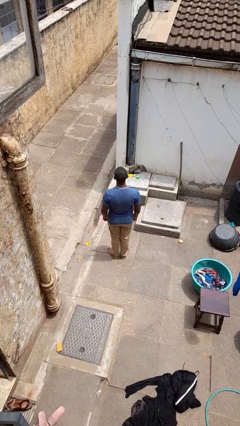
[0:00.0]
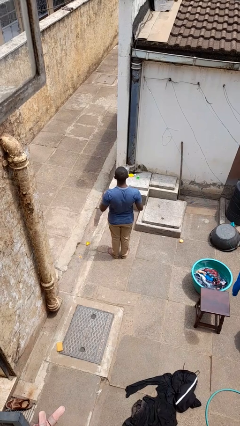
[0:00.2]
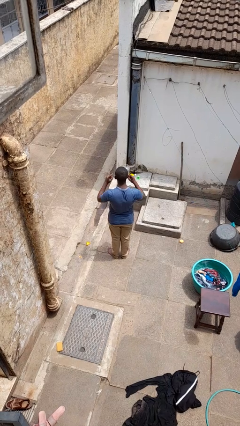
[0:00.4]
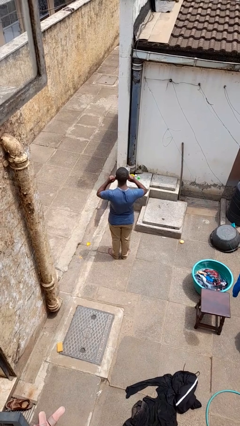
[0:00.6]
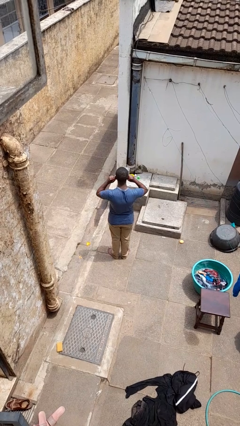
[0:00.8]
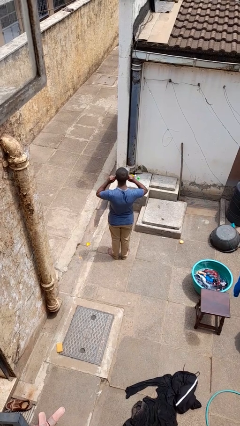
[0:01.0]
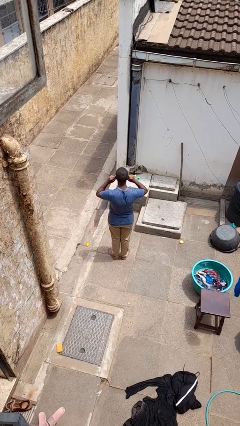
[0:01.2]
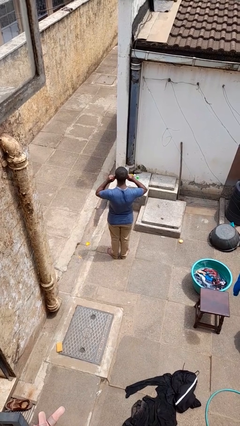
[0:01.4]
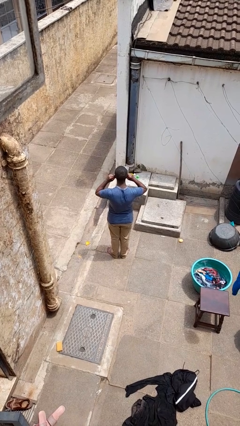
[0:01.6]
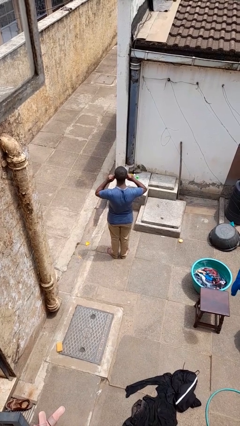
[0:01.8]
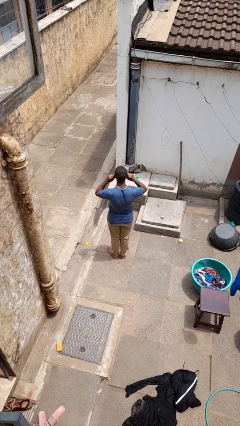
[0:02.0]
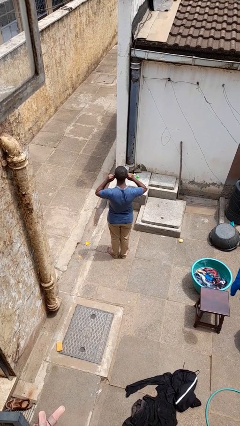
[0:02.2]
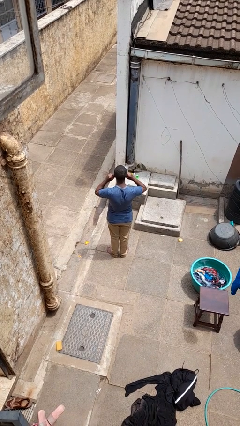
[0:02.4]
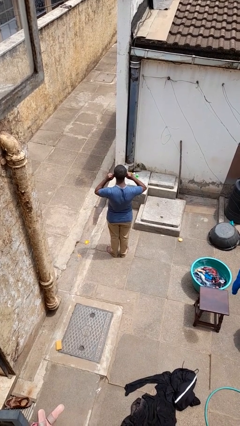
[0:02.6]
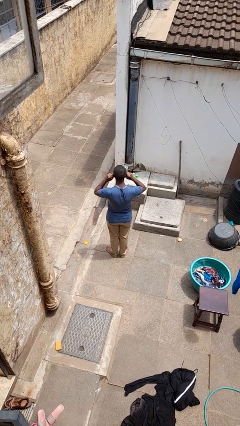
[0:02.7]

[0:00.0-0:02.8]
person puts fingers in ear

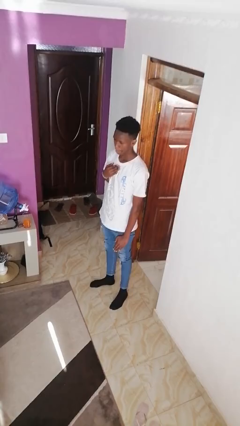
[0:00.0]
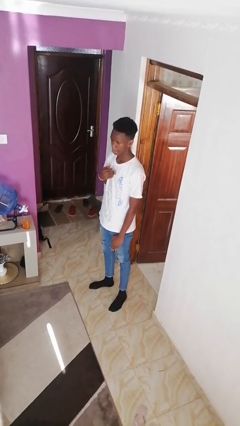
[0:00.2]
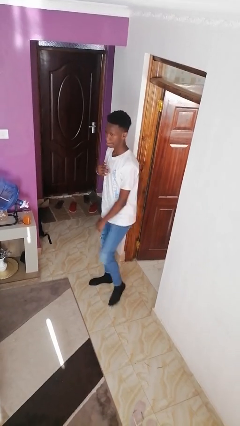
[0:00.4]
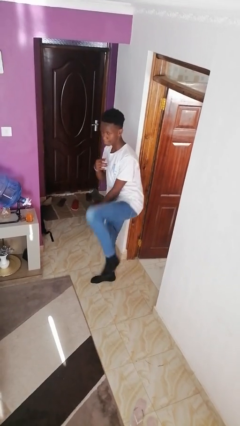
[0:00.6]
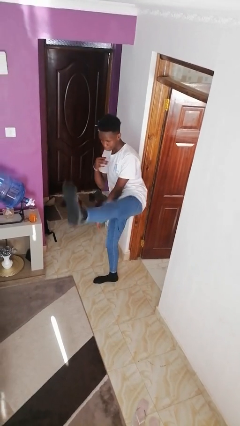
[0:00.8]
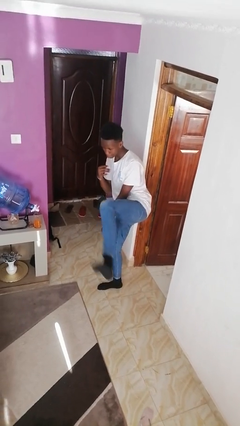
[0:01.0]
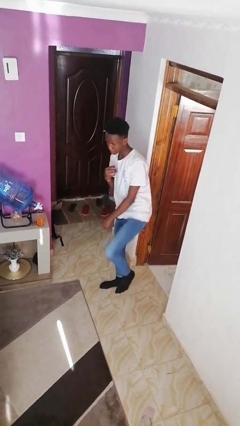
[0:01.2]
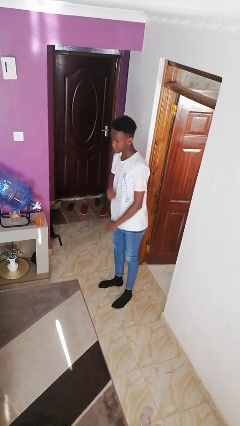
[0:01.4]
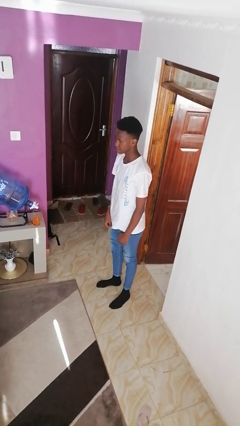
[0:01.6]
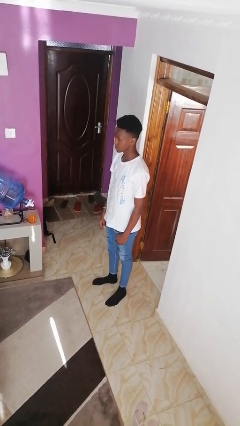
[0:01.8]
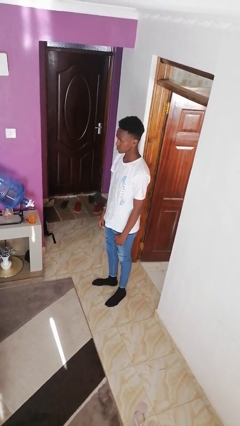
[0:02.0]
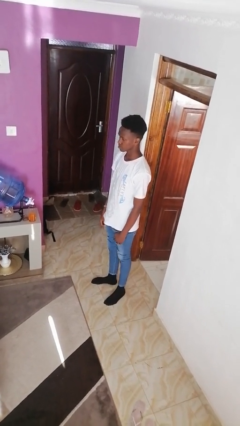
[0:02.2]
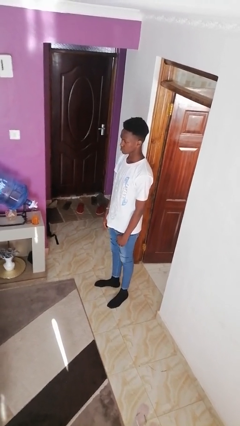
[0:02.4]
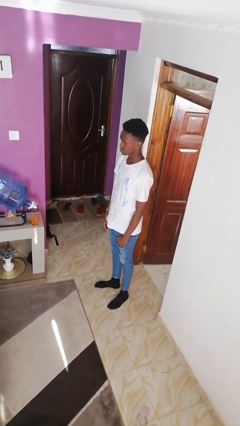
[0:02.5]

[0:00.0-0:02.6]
person karate kicks

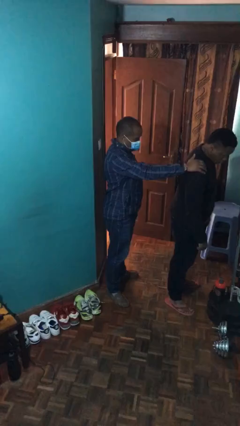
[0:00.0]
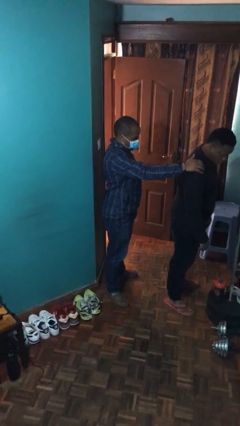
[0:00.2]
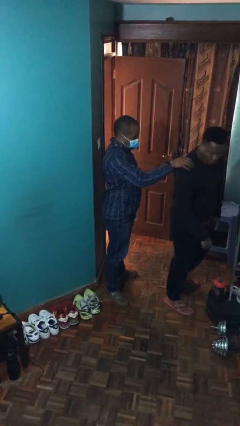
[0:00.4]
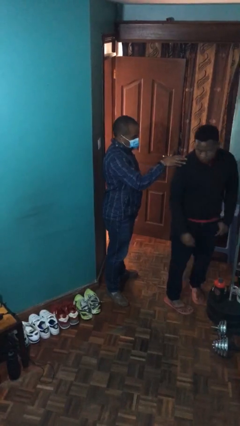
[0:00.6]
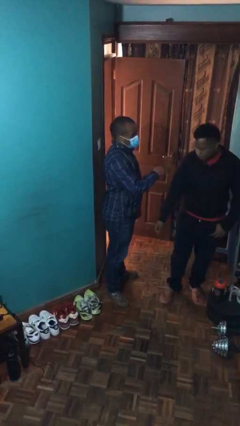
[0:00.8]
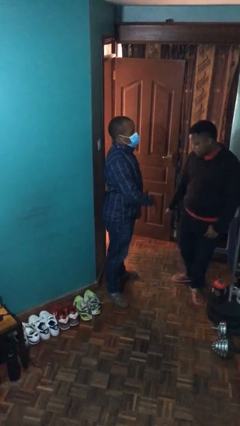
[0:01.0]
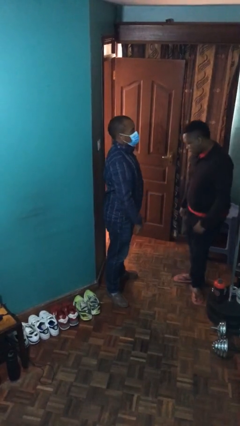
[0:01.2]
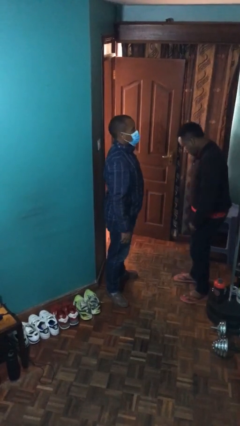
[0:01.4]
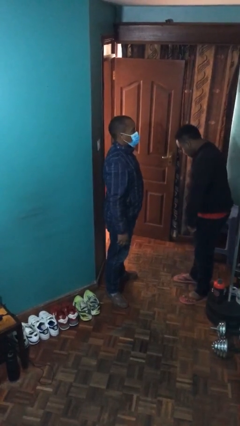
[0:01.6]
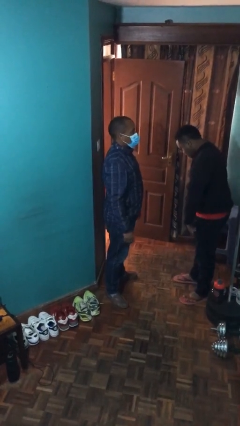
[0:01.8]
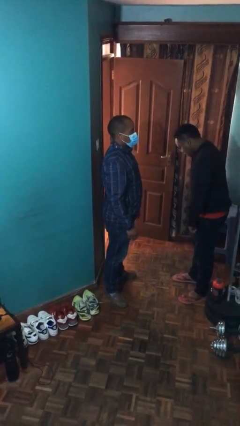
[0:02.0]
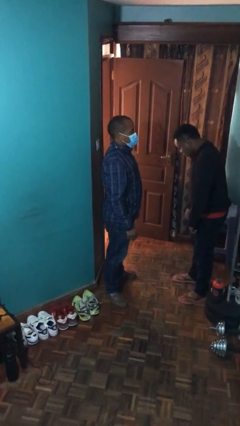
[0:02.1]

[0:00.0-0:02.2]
person spins person around

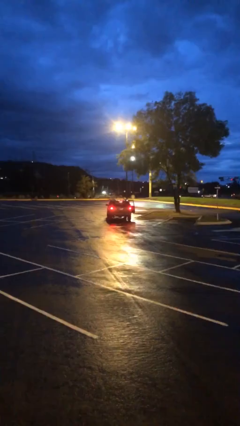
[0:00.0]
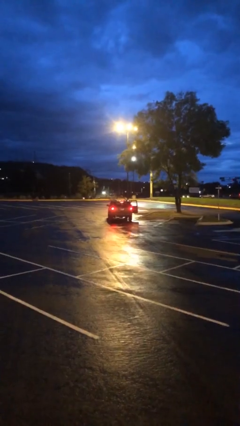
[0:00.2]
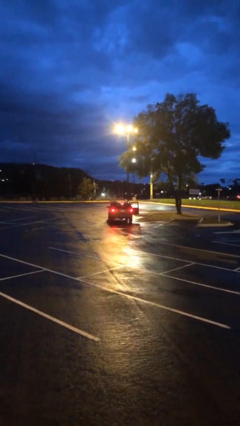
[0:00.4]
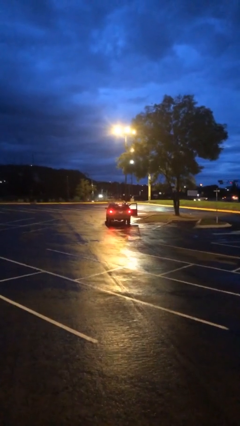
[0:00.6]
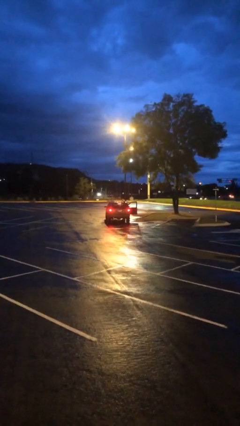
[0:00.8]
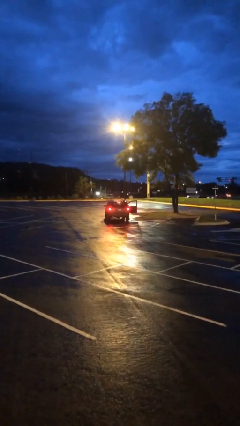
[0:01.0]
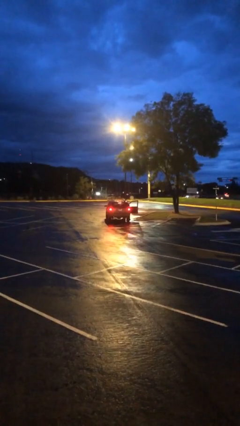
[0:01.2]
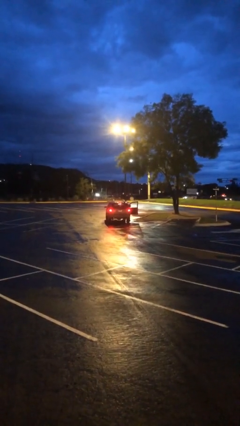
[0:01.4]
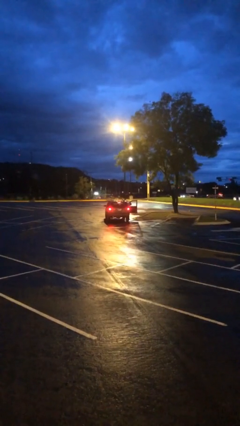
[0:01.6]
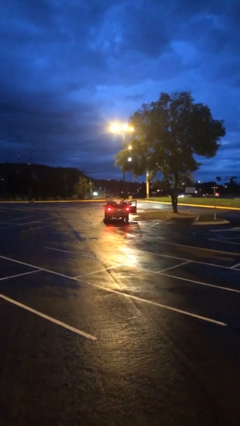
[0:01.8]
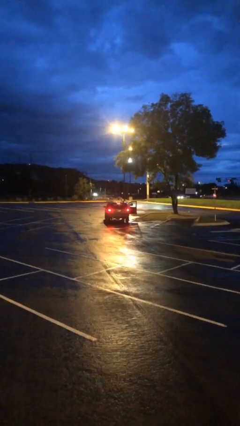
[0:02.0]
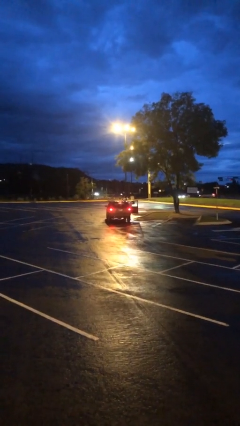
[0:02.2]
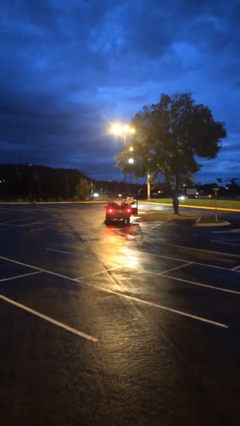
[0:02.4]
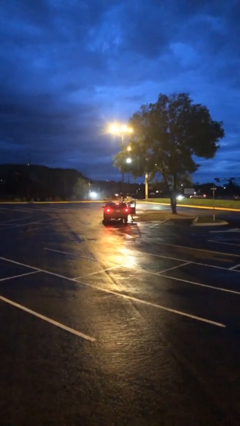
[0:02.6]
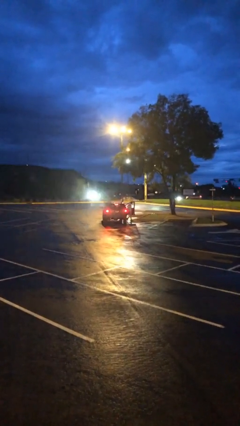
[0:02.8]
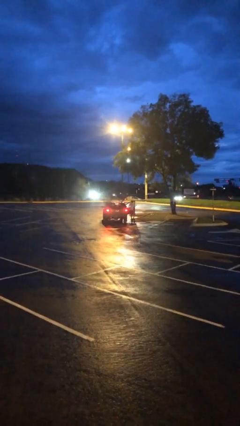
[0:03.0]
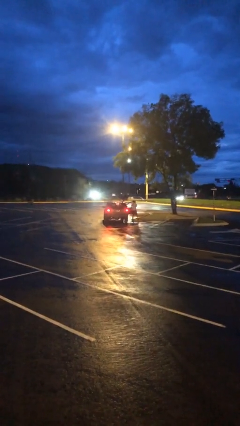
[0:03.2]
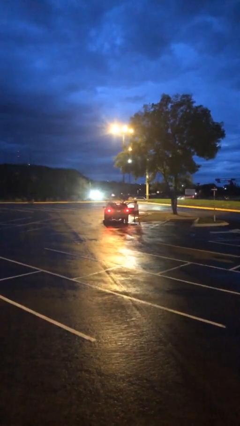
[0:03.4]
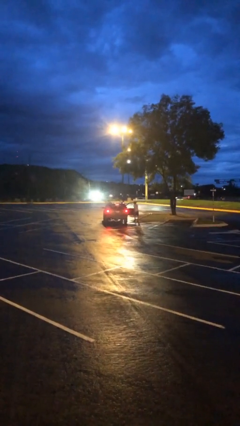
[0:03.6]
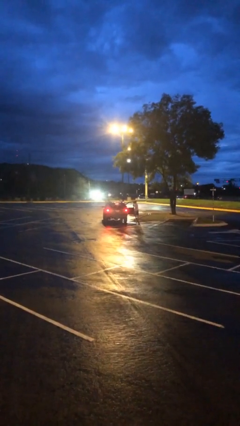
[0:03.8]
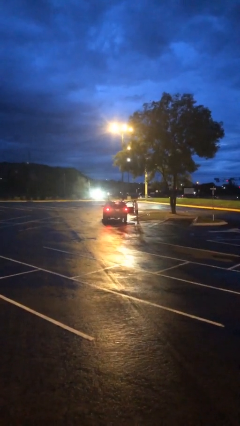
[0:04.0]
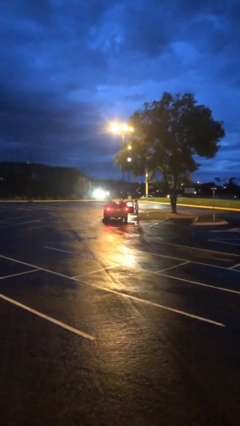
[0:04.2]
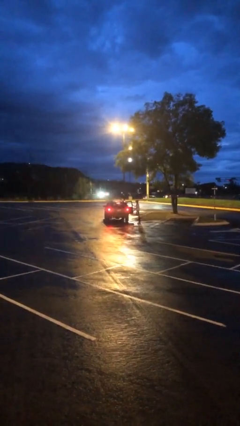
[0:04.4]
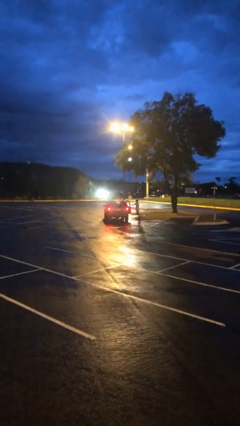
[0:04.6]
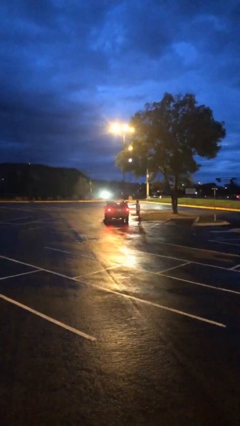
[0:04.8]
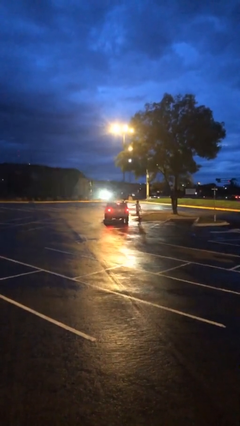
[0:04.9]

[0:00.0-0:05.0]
car drops off person

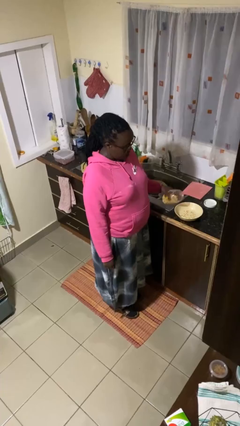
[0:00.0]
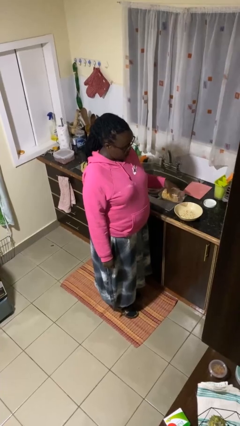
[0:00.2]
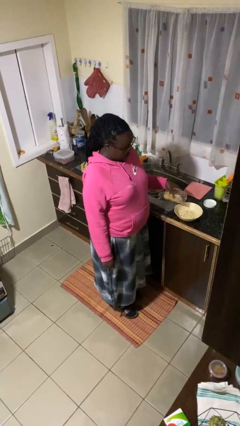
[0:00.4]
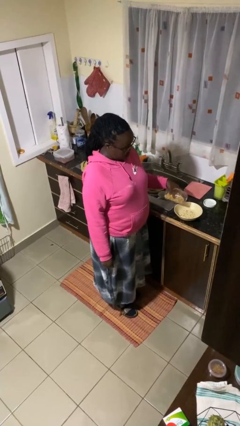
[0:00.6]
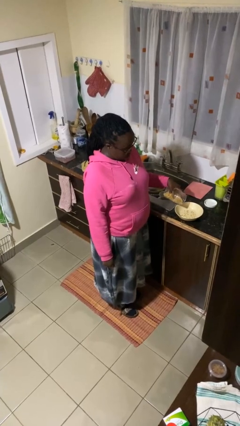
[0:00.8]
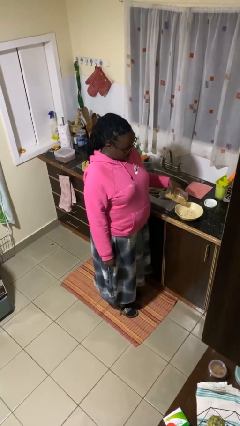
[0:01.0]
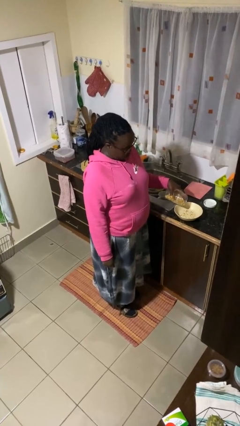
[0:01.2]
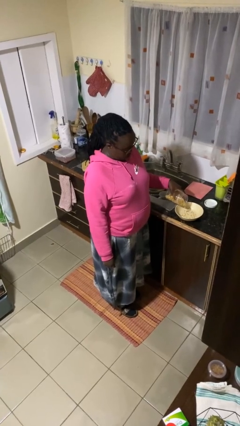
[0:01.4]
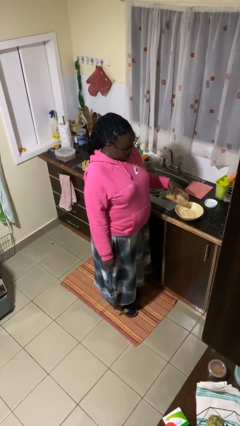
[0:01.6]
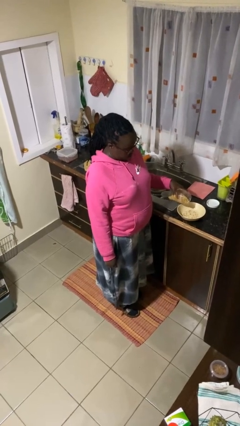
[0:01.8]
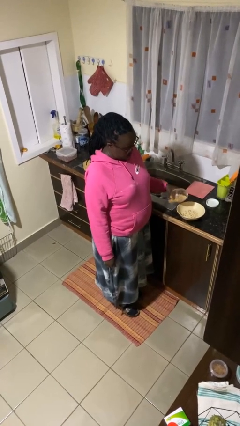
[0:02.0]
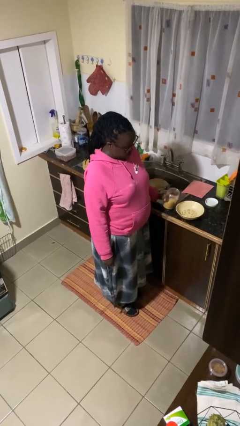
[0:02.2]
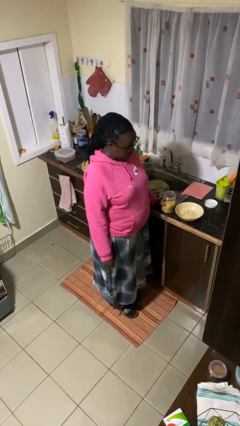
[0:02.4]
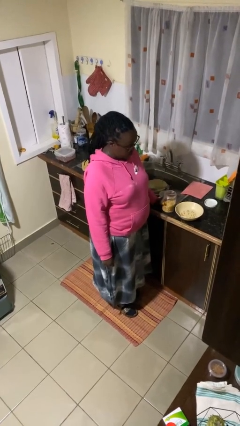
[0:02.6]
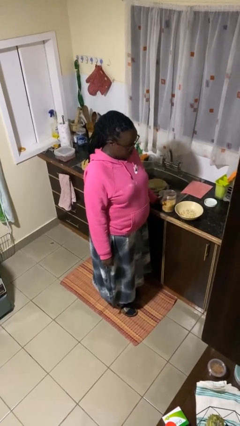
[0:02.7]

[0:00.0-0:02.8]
person pours into bowl

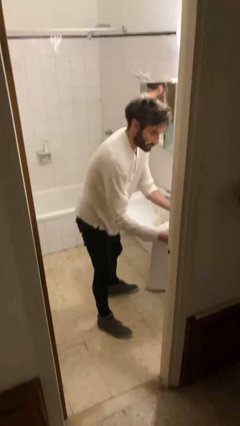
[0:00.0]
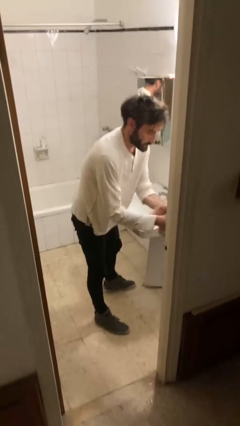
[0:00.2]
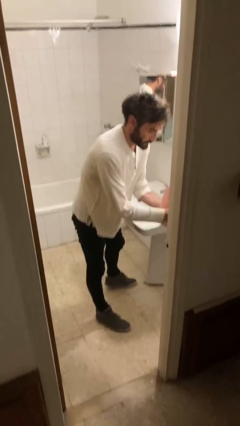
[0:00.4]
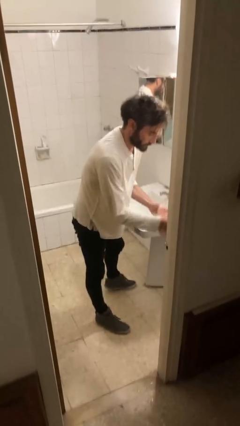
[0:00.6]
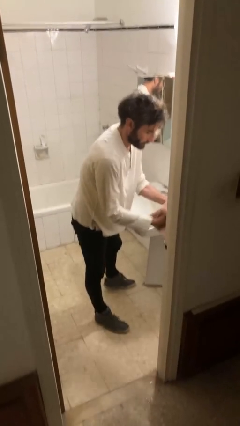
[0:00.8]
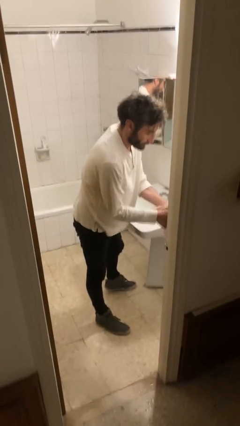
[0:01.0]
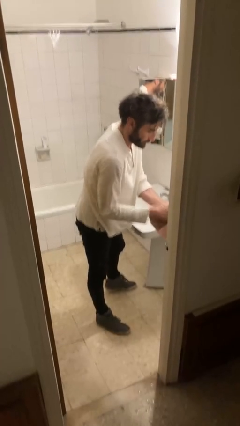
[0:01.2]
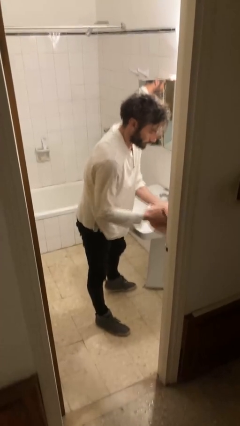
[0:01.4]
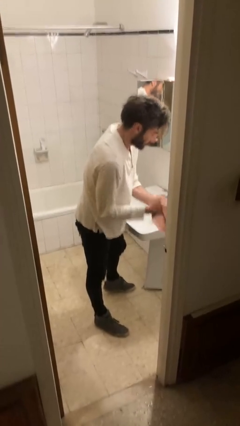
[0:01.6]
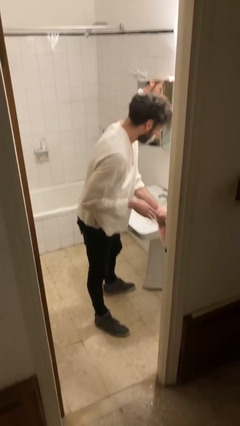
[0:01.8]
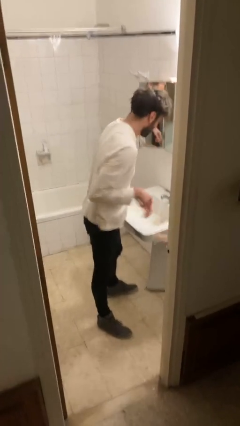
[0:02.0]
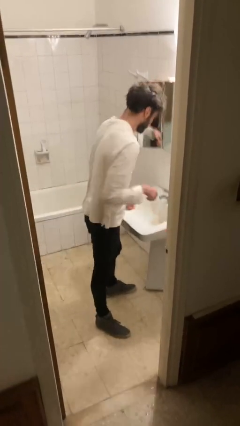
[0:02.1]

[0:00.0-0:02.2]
person dries hands with towel

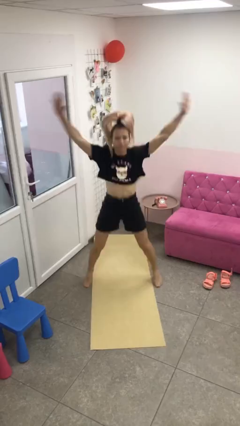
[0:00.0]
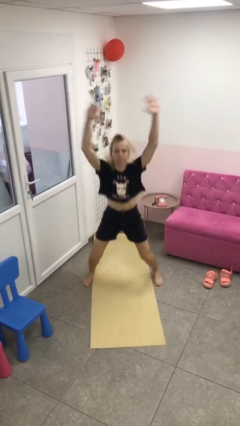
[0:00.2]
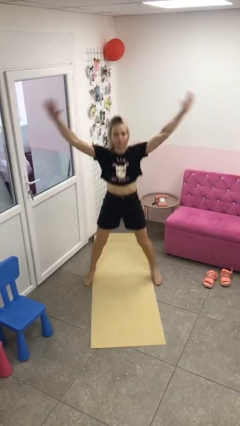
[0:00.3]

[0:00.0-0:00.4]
person exercises with jumping jacks
